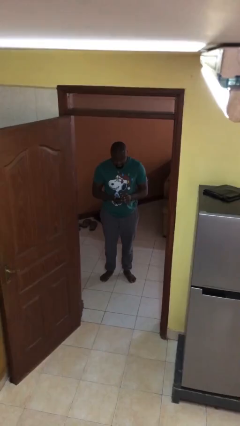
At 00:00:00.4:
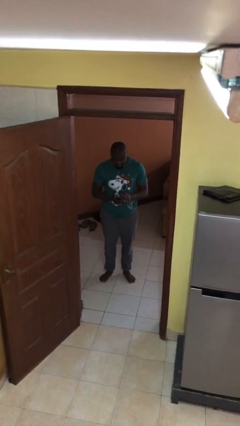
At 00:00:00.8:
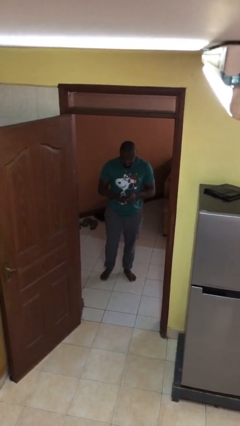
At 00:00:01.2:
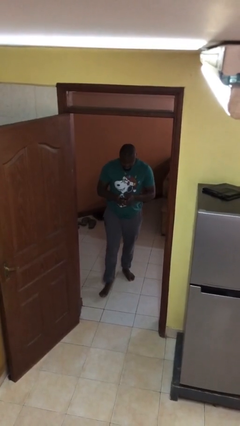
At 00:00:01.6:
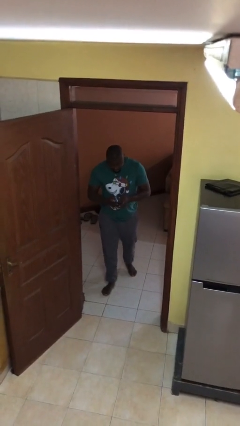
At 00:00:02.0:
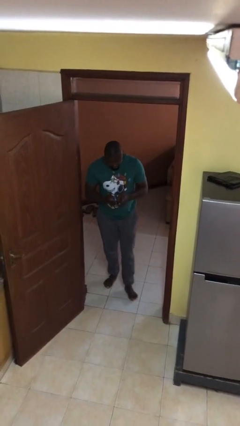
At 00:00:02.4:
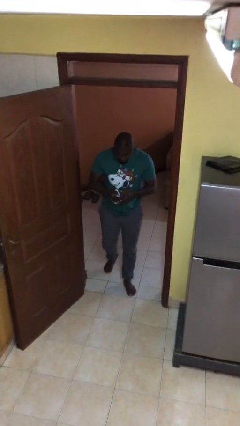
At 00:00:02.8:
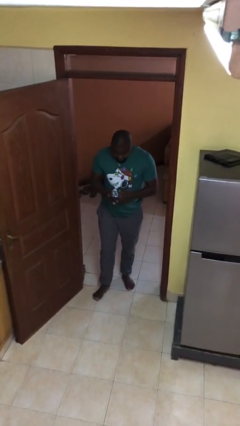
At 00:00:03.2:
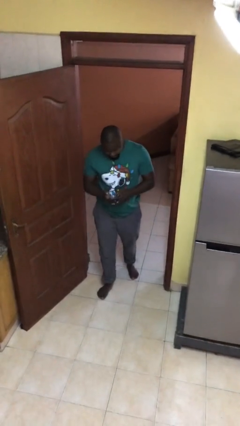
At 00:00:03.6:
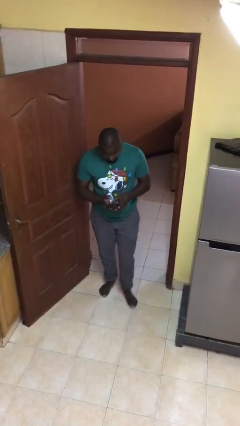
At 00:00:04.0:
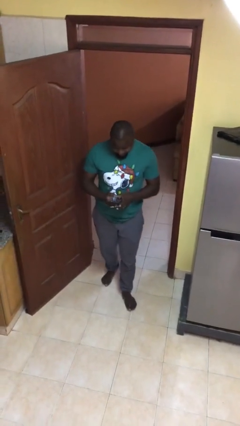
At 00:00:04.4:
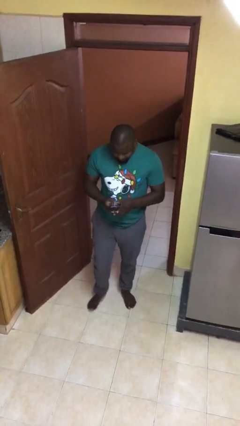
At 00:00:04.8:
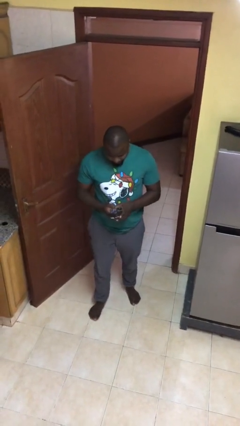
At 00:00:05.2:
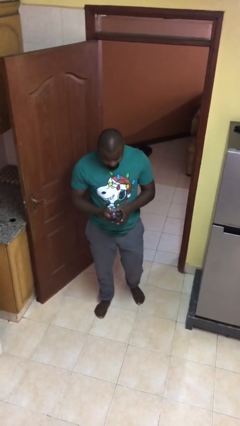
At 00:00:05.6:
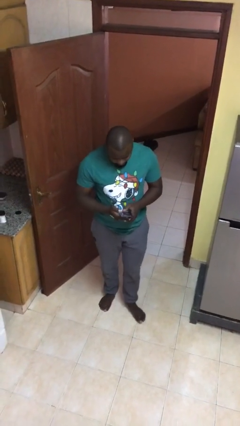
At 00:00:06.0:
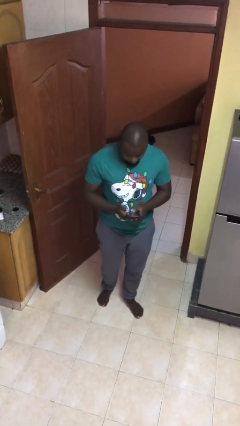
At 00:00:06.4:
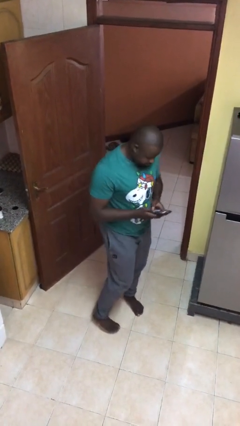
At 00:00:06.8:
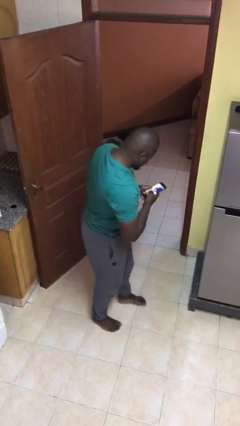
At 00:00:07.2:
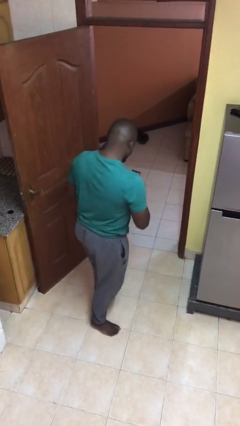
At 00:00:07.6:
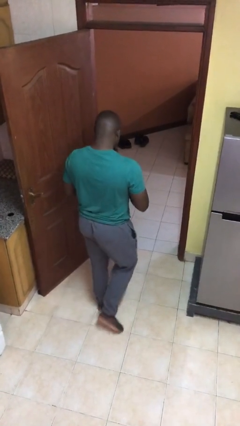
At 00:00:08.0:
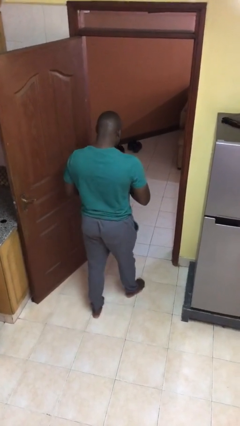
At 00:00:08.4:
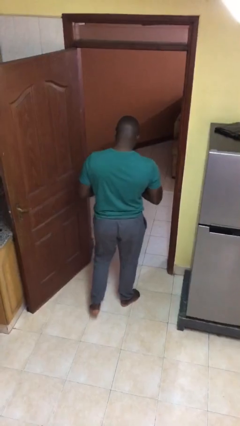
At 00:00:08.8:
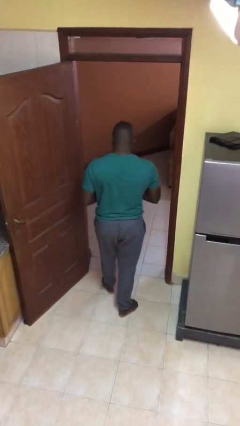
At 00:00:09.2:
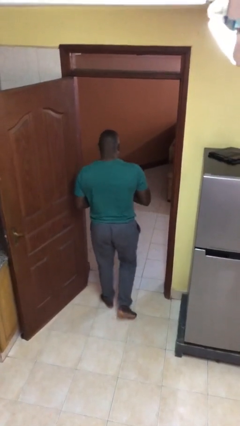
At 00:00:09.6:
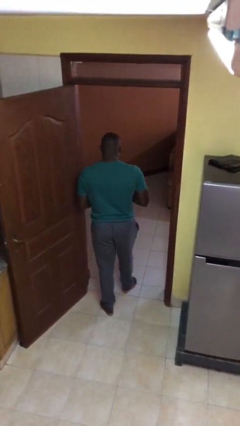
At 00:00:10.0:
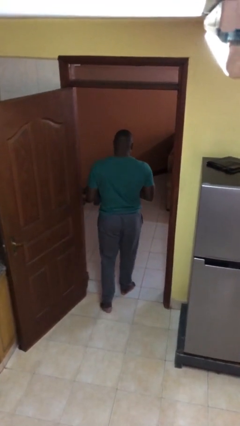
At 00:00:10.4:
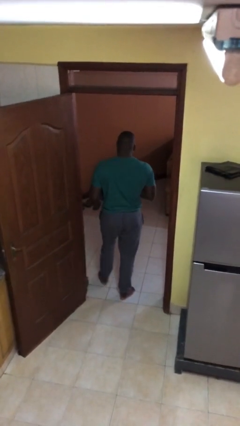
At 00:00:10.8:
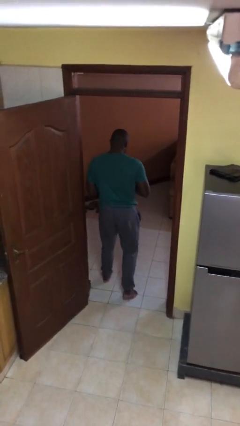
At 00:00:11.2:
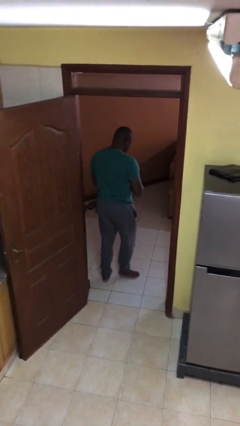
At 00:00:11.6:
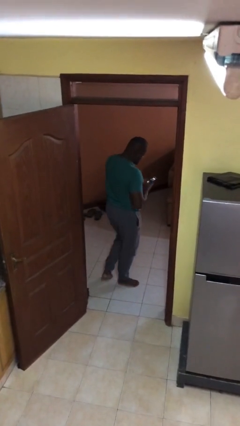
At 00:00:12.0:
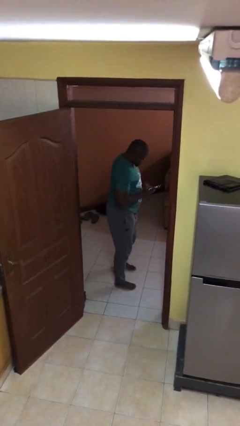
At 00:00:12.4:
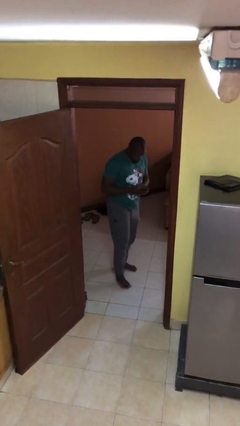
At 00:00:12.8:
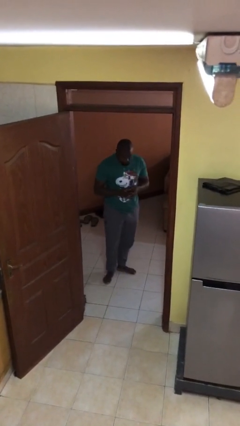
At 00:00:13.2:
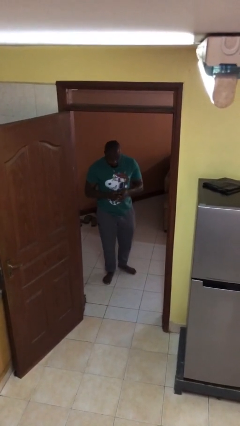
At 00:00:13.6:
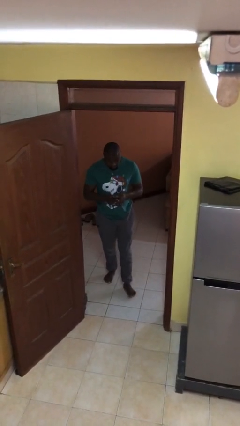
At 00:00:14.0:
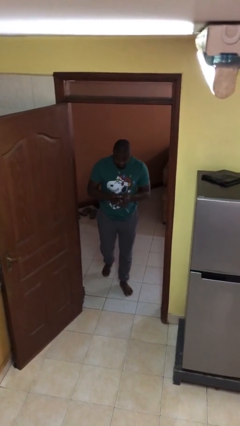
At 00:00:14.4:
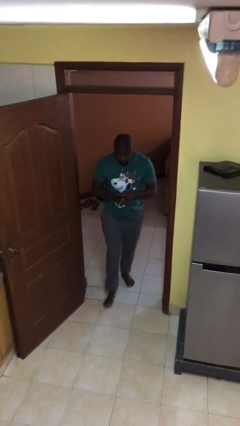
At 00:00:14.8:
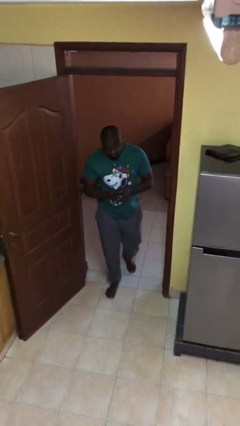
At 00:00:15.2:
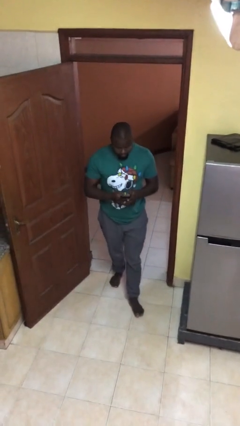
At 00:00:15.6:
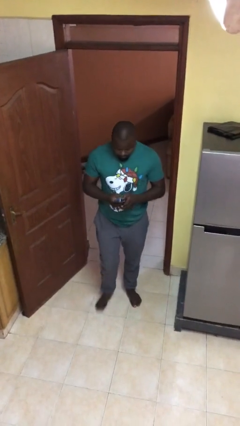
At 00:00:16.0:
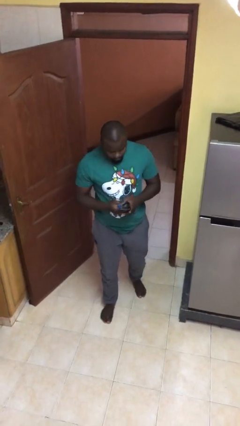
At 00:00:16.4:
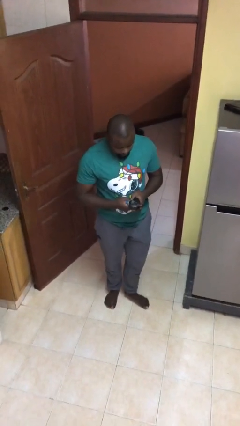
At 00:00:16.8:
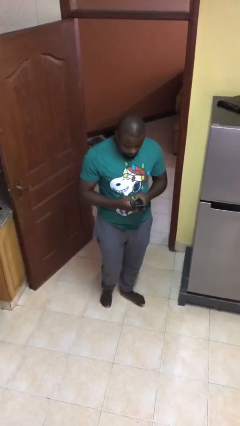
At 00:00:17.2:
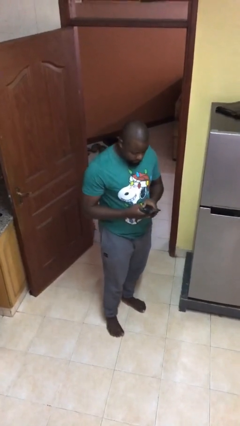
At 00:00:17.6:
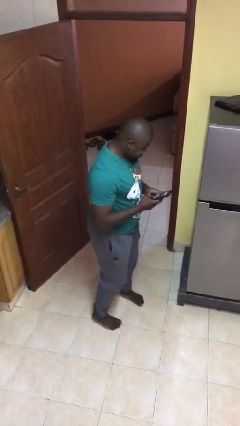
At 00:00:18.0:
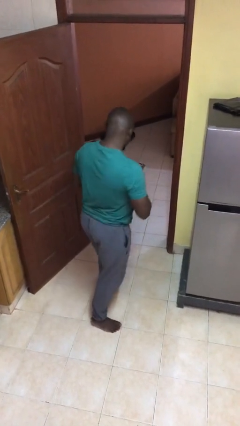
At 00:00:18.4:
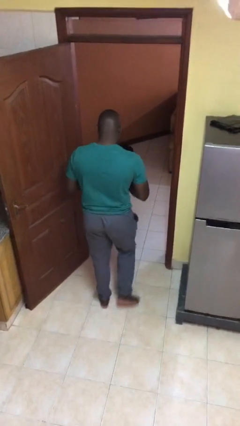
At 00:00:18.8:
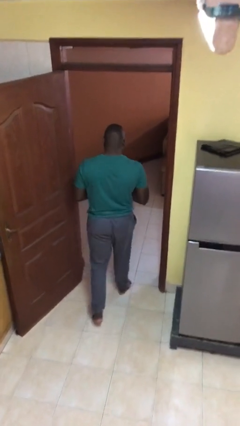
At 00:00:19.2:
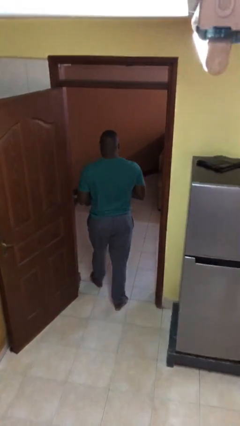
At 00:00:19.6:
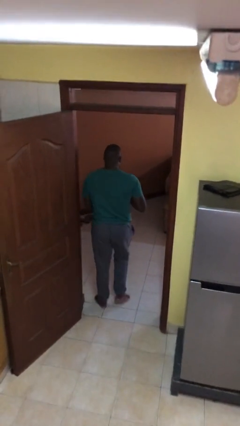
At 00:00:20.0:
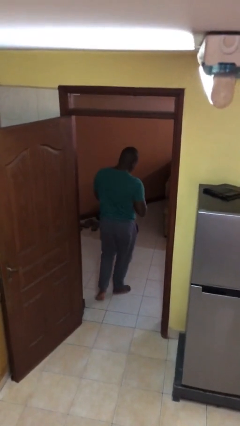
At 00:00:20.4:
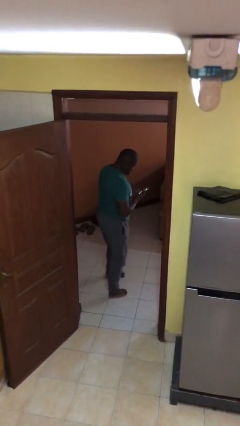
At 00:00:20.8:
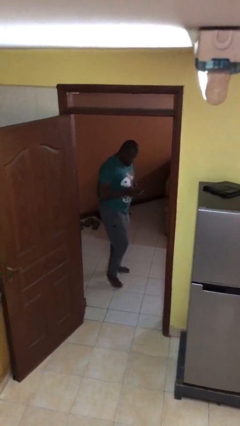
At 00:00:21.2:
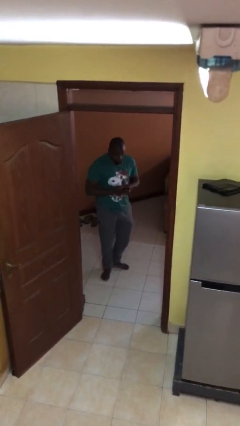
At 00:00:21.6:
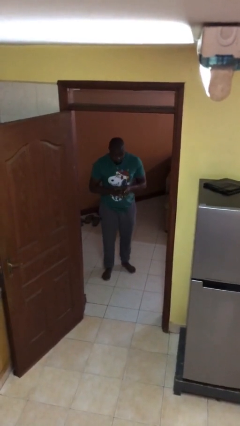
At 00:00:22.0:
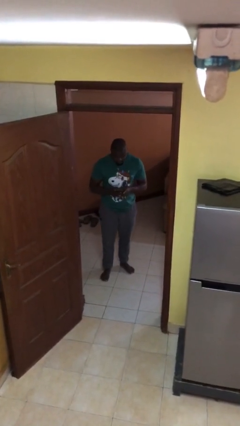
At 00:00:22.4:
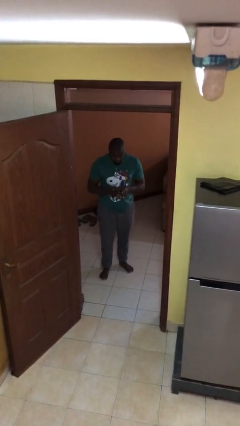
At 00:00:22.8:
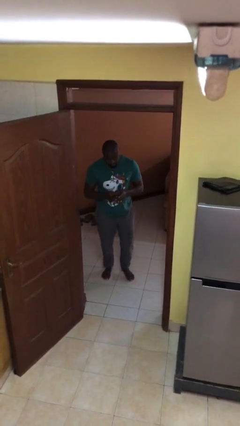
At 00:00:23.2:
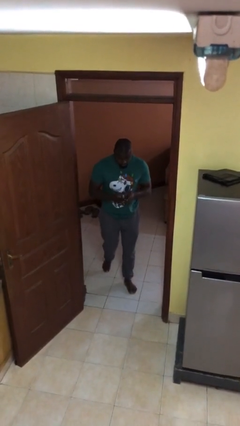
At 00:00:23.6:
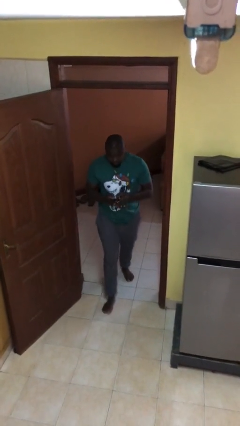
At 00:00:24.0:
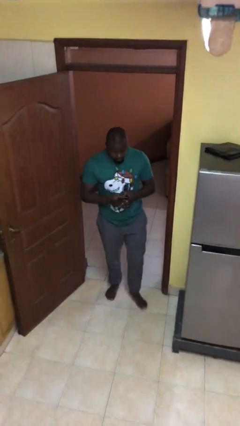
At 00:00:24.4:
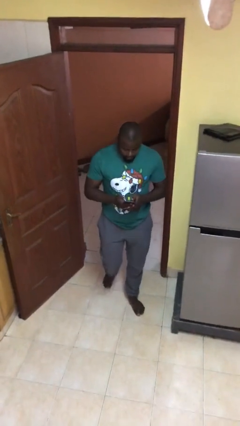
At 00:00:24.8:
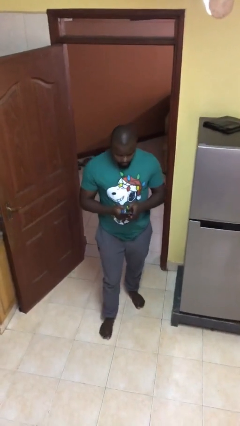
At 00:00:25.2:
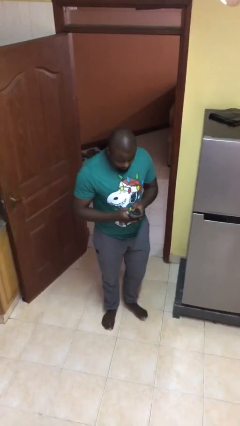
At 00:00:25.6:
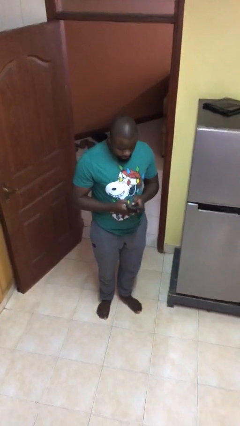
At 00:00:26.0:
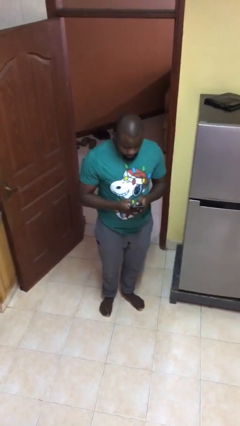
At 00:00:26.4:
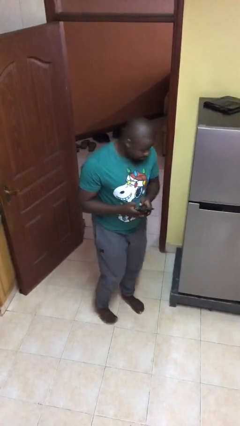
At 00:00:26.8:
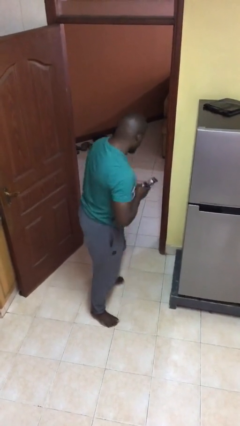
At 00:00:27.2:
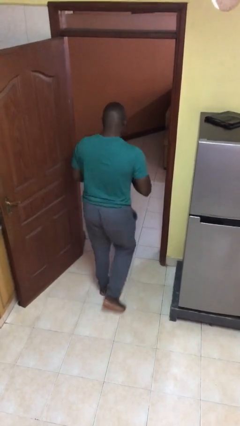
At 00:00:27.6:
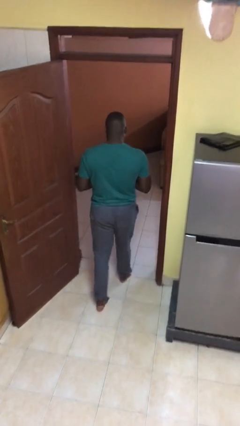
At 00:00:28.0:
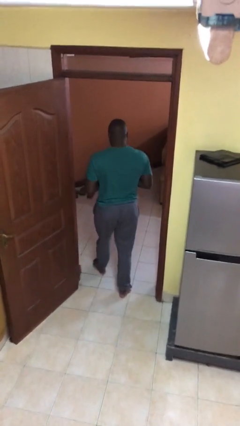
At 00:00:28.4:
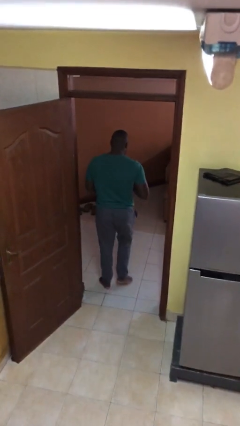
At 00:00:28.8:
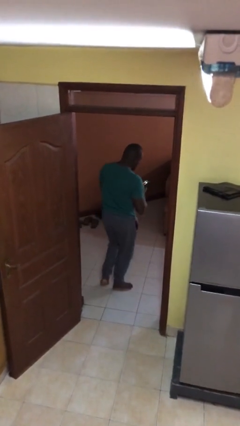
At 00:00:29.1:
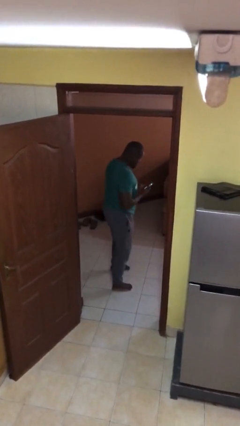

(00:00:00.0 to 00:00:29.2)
person texts on phone

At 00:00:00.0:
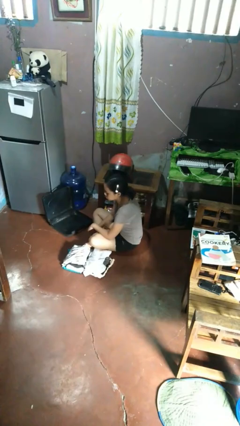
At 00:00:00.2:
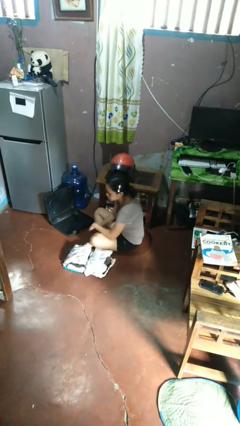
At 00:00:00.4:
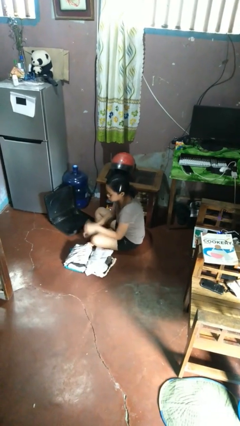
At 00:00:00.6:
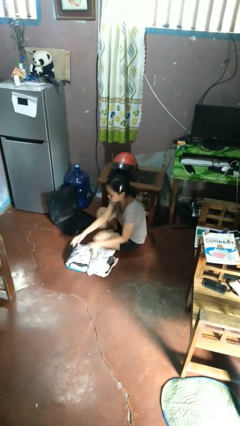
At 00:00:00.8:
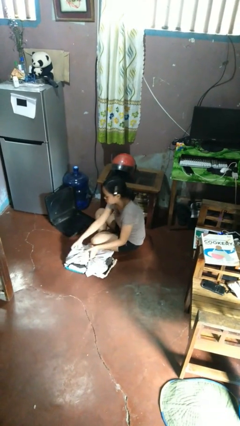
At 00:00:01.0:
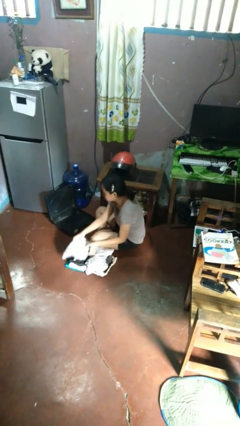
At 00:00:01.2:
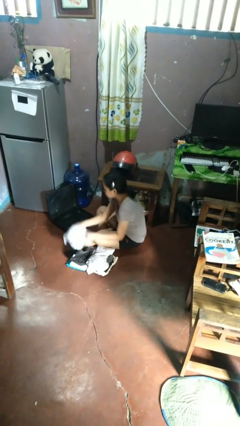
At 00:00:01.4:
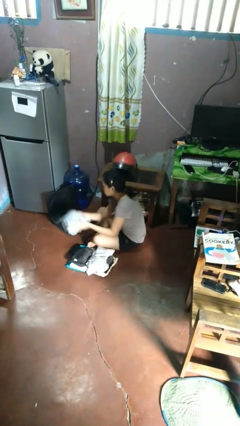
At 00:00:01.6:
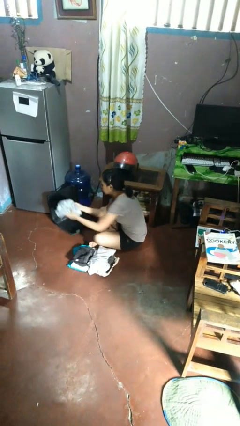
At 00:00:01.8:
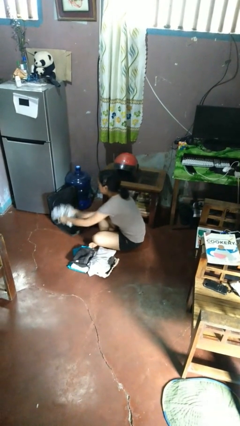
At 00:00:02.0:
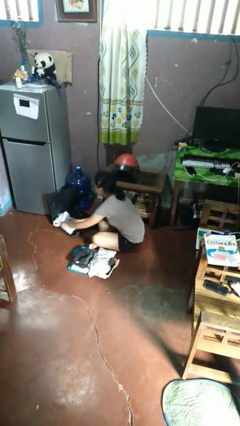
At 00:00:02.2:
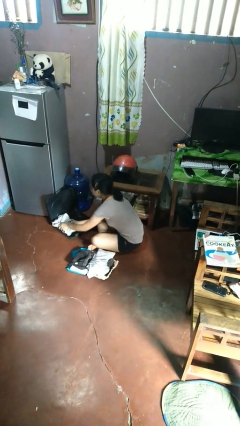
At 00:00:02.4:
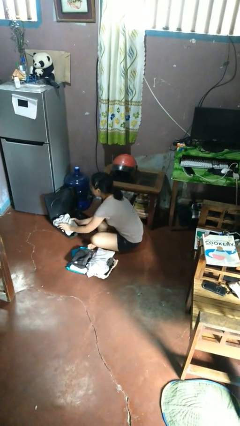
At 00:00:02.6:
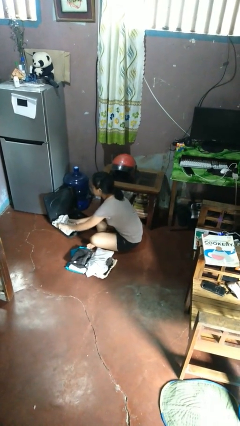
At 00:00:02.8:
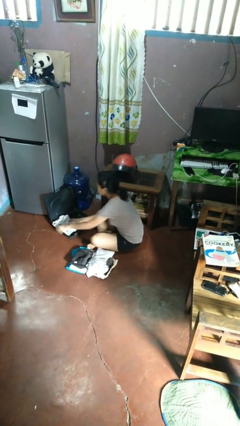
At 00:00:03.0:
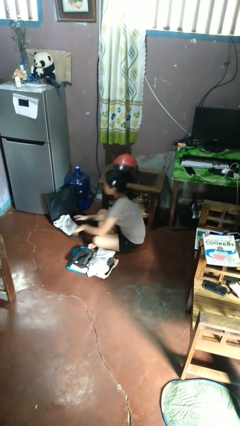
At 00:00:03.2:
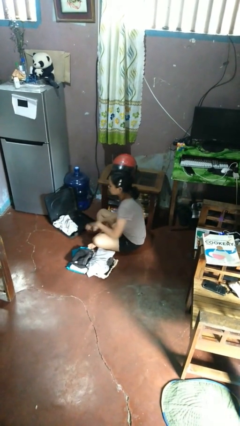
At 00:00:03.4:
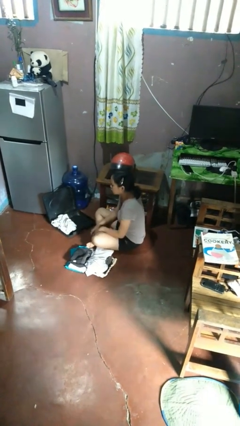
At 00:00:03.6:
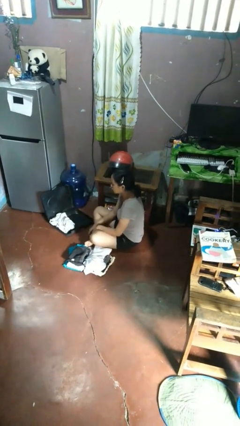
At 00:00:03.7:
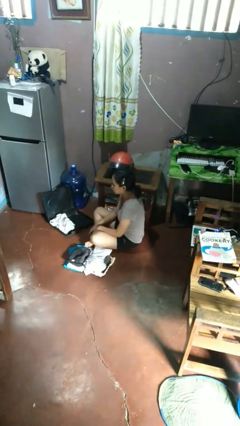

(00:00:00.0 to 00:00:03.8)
person loads clothes into suitcase
